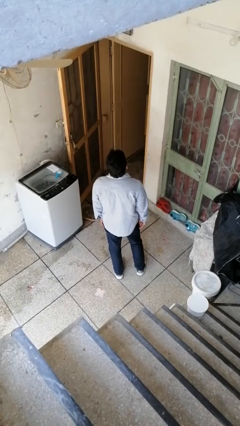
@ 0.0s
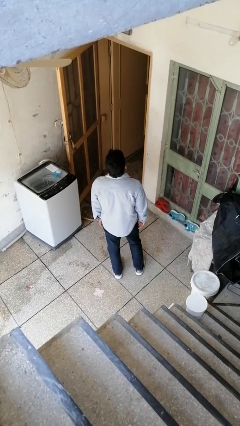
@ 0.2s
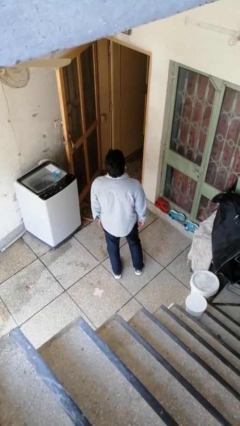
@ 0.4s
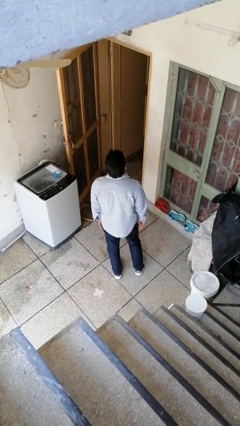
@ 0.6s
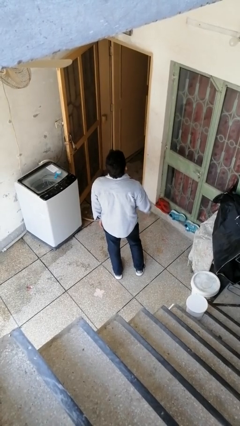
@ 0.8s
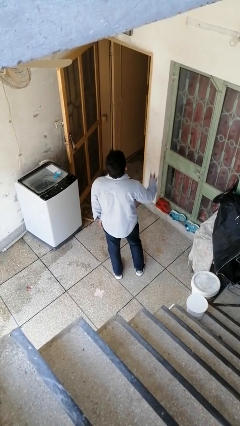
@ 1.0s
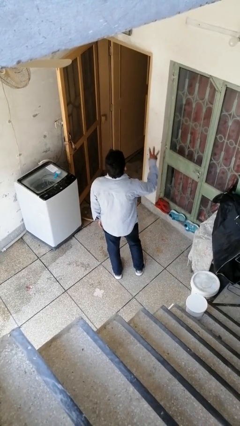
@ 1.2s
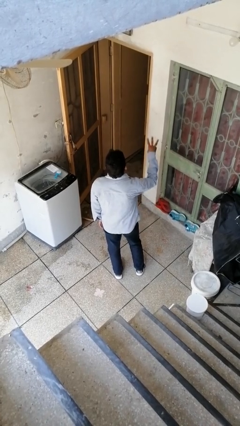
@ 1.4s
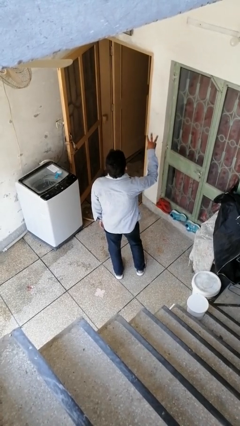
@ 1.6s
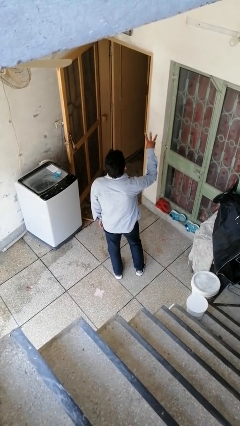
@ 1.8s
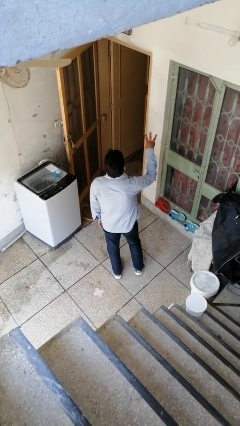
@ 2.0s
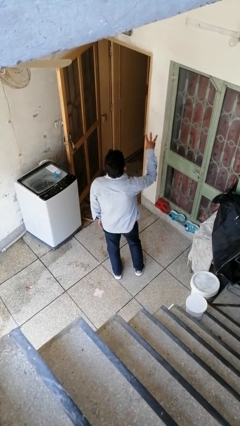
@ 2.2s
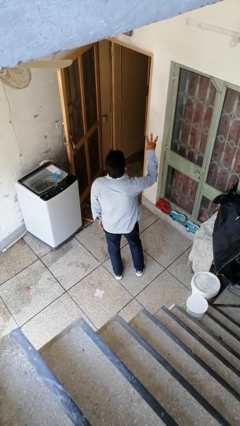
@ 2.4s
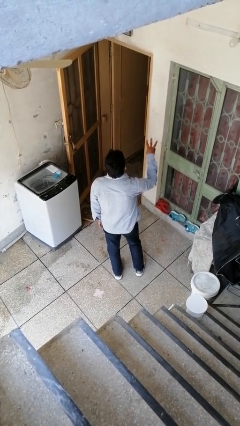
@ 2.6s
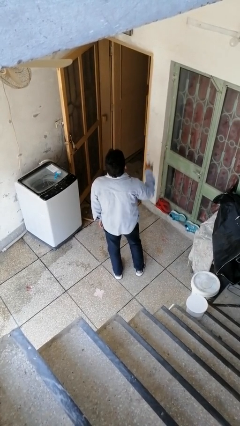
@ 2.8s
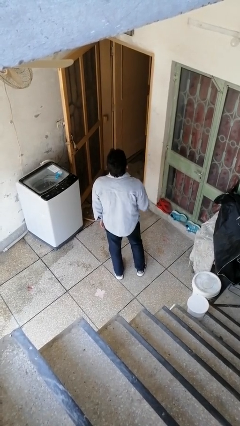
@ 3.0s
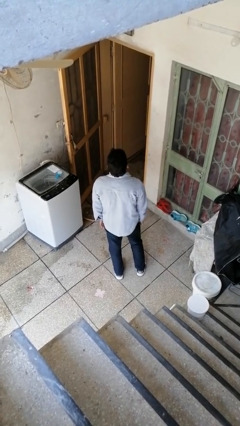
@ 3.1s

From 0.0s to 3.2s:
person gestures number three

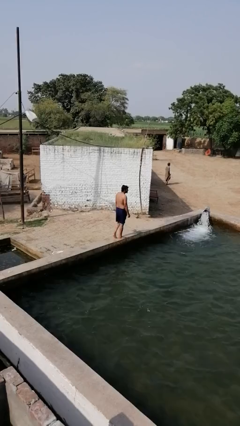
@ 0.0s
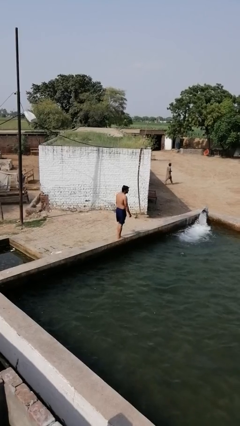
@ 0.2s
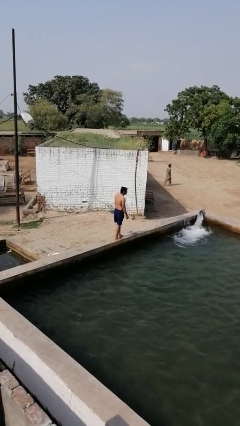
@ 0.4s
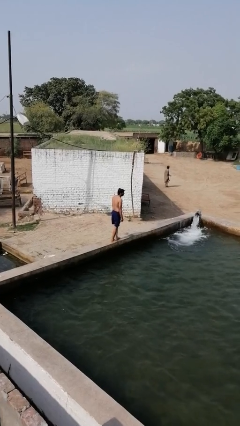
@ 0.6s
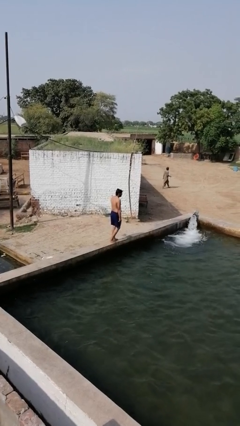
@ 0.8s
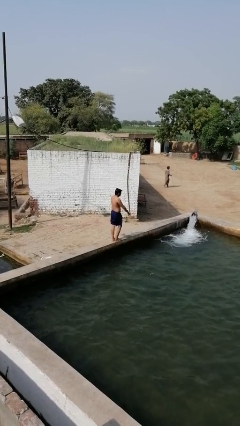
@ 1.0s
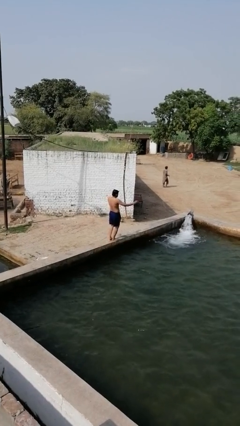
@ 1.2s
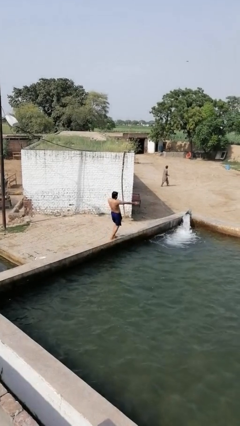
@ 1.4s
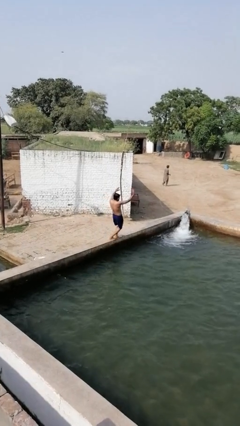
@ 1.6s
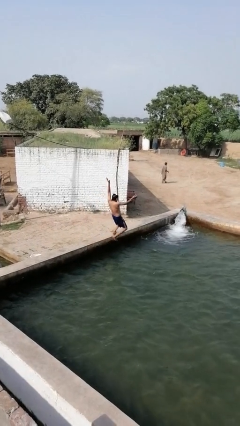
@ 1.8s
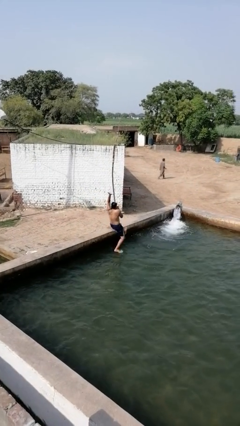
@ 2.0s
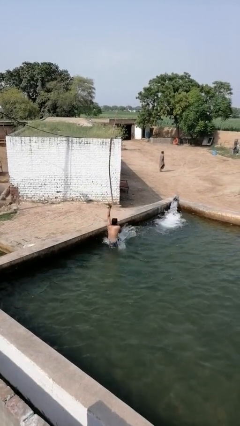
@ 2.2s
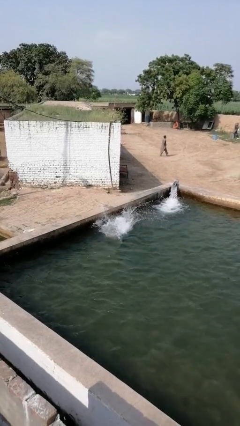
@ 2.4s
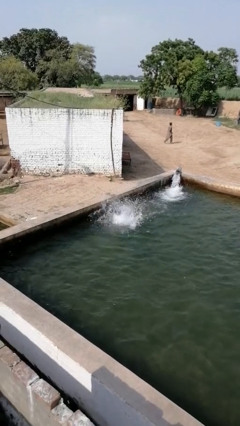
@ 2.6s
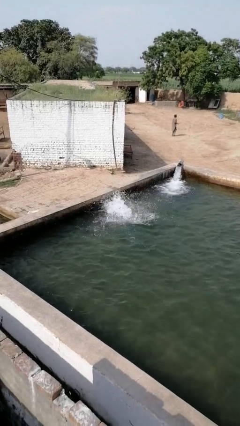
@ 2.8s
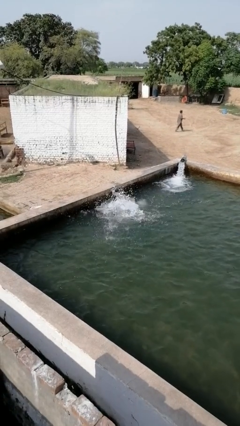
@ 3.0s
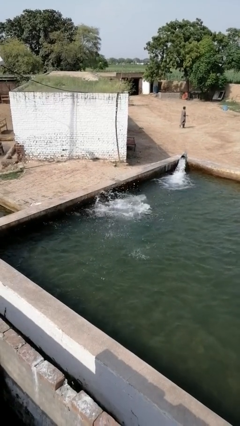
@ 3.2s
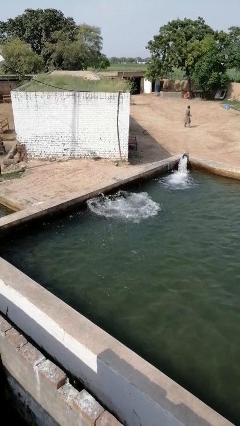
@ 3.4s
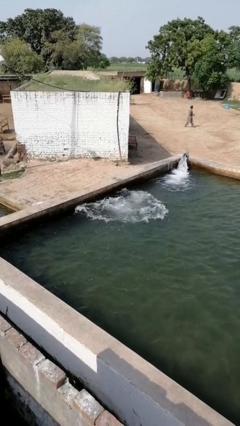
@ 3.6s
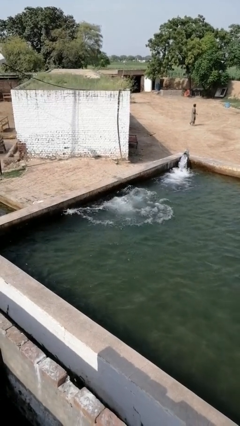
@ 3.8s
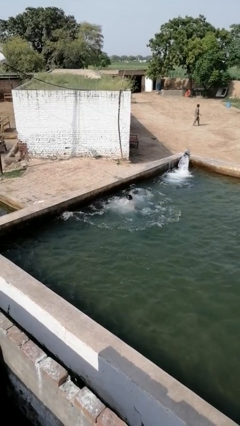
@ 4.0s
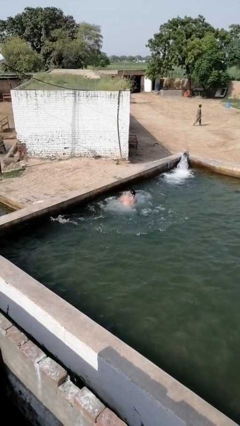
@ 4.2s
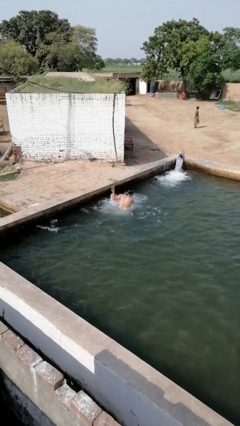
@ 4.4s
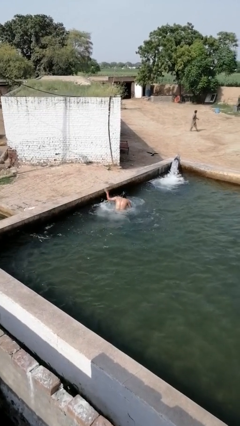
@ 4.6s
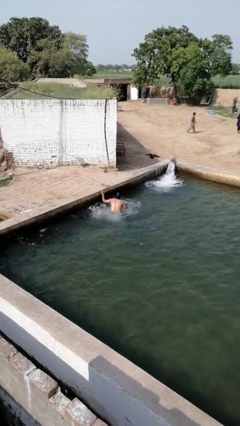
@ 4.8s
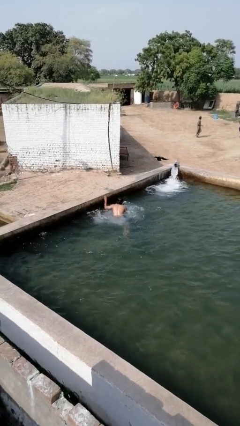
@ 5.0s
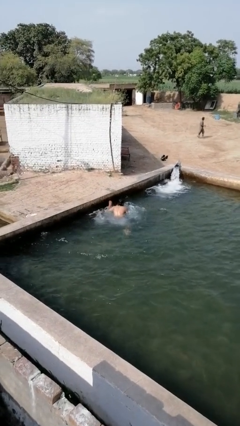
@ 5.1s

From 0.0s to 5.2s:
person falls into pool

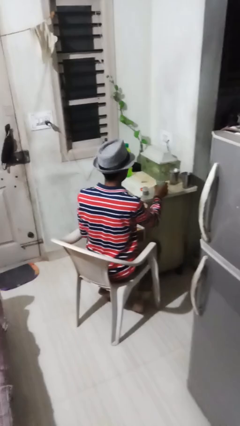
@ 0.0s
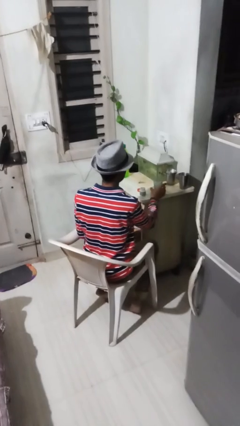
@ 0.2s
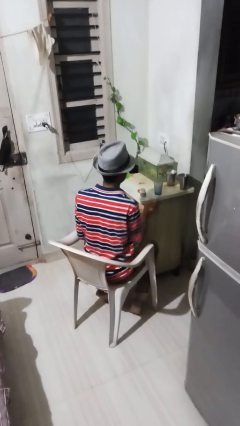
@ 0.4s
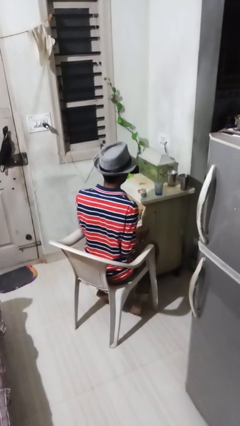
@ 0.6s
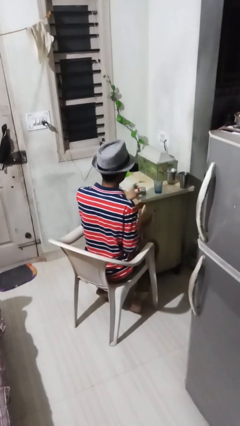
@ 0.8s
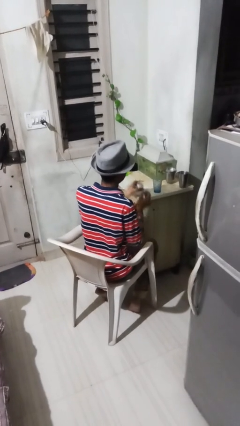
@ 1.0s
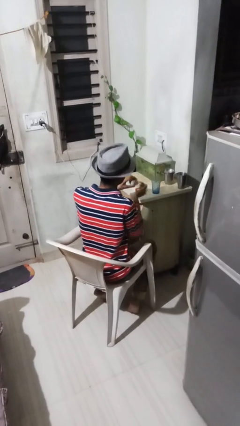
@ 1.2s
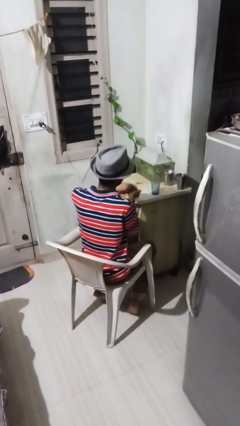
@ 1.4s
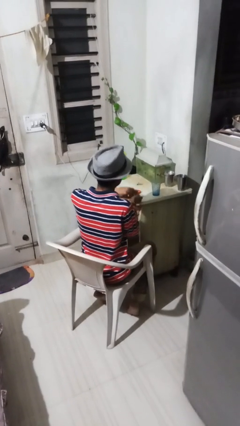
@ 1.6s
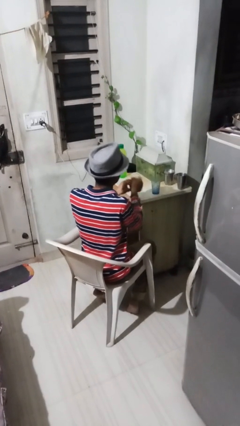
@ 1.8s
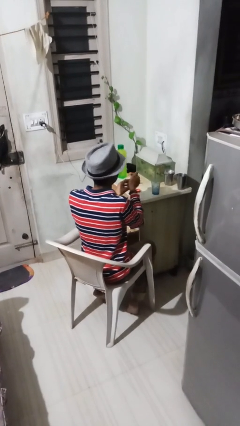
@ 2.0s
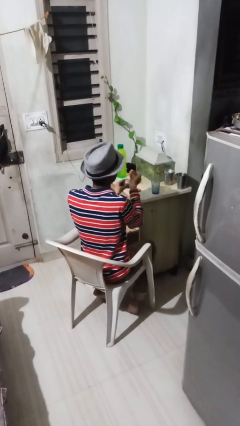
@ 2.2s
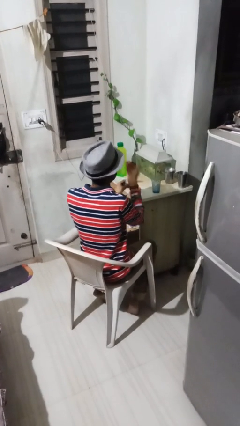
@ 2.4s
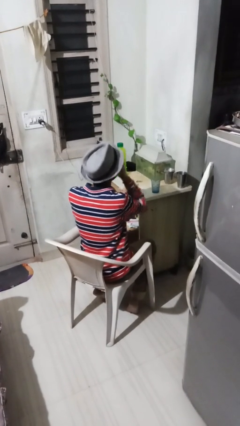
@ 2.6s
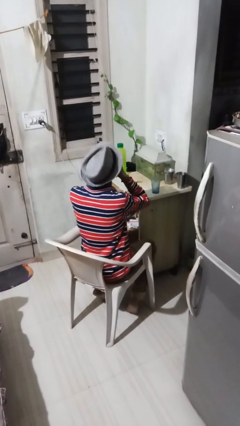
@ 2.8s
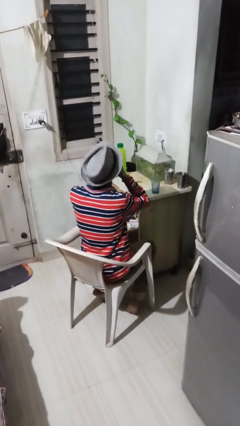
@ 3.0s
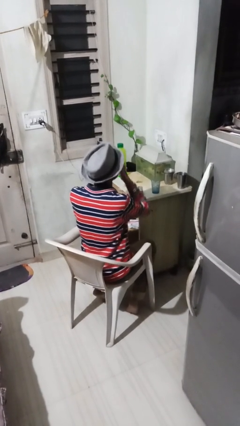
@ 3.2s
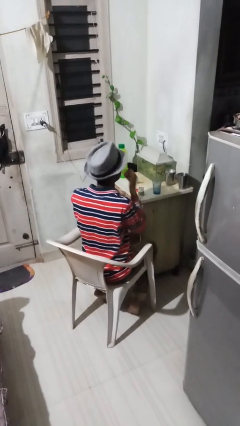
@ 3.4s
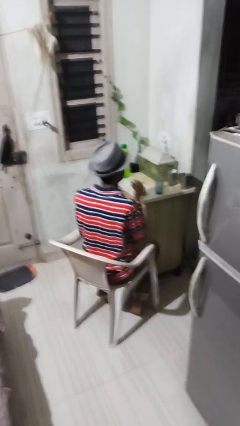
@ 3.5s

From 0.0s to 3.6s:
person takes medicine pills

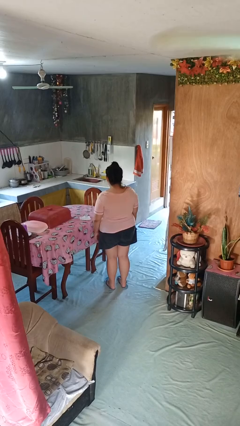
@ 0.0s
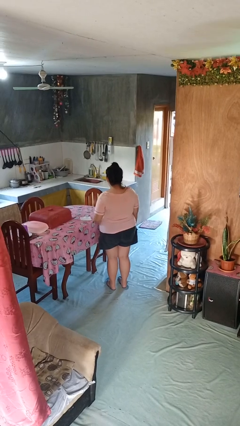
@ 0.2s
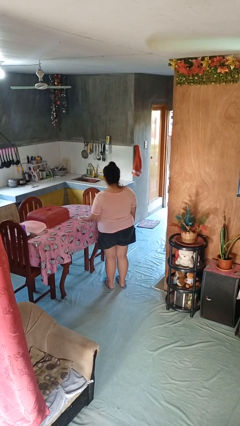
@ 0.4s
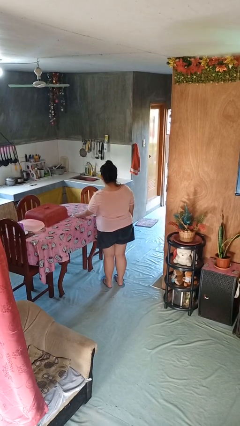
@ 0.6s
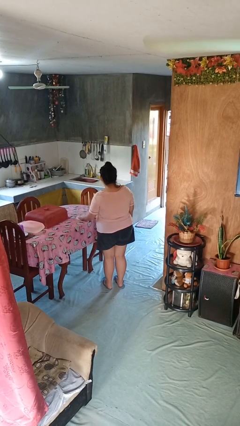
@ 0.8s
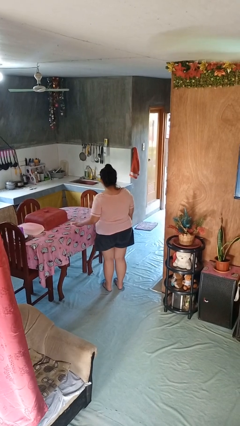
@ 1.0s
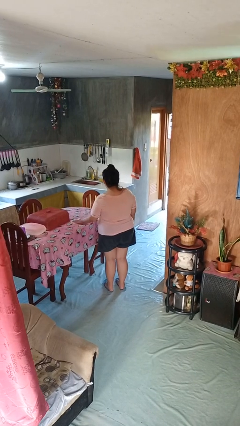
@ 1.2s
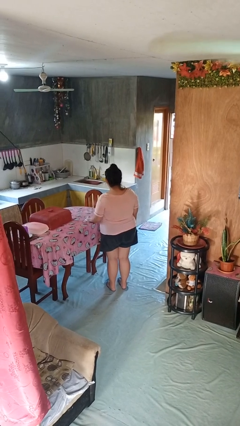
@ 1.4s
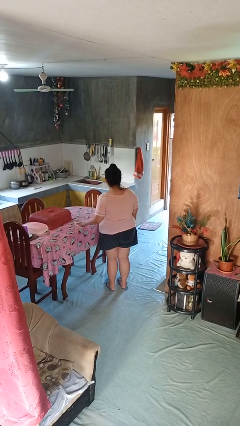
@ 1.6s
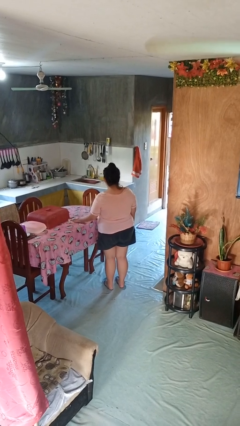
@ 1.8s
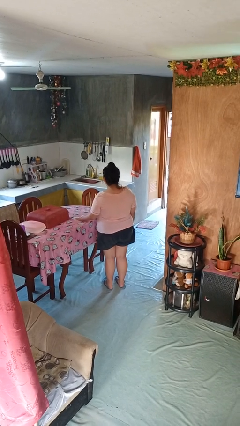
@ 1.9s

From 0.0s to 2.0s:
person cleans table with rag

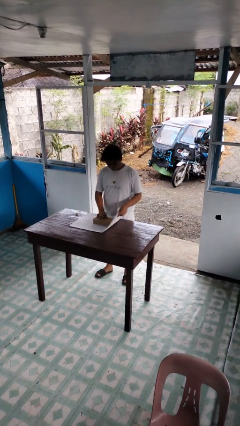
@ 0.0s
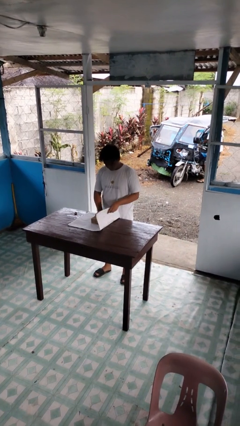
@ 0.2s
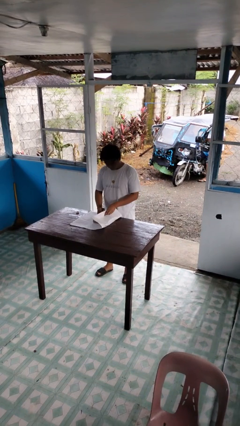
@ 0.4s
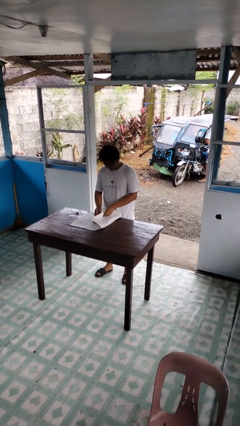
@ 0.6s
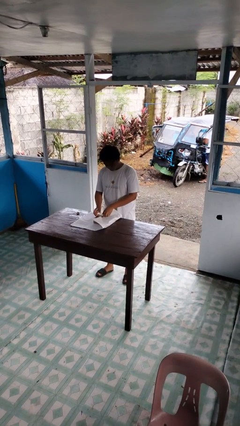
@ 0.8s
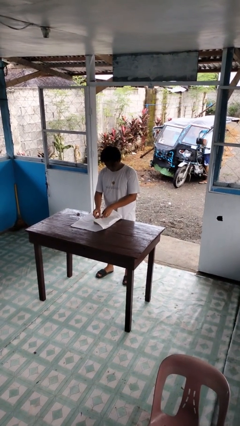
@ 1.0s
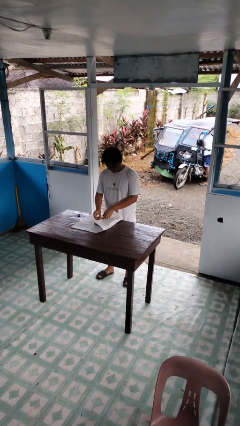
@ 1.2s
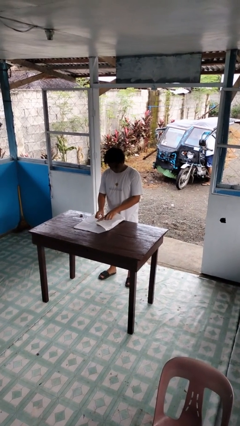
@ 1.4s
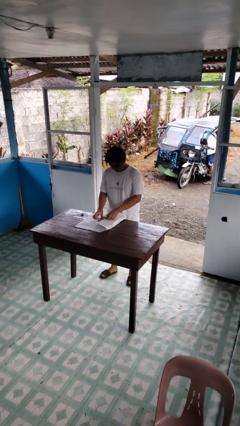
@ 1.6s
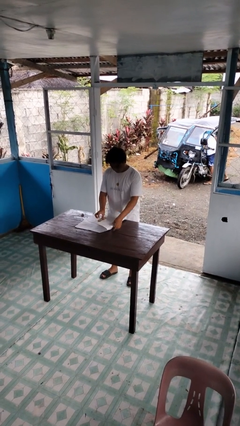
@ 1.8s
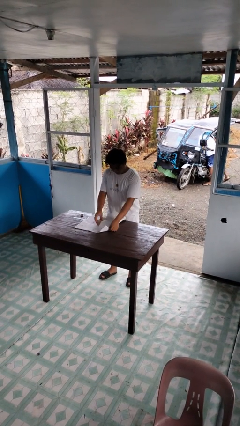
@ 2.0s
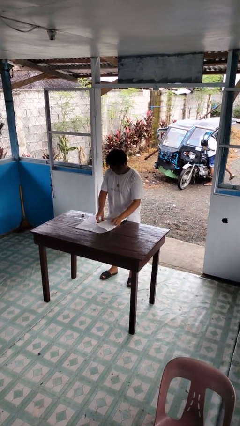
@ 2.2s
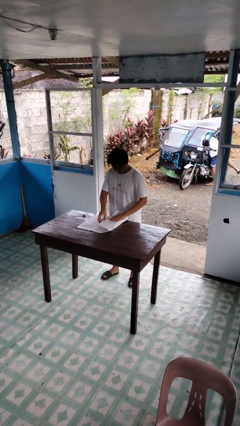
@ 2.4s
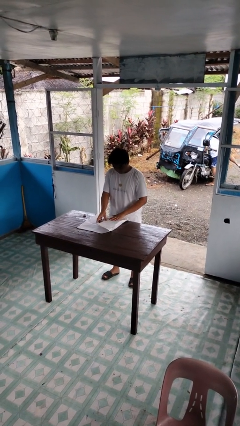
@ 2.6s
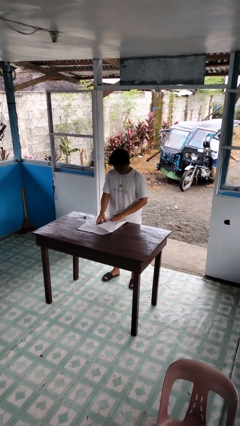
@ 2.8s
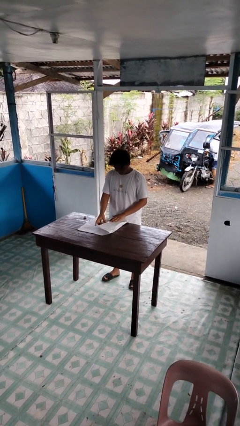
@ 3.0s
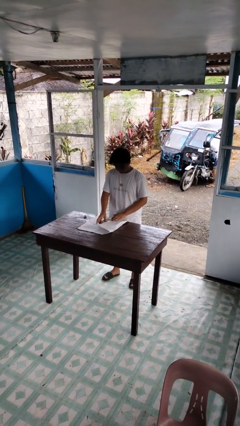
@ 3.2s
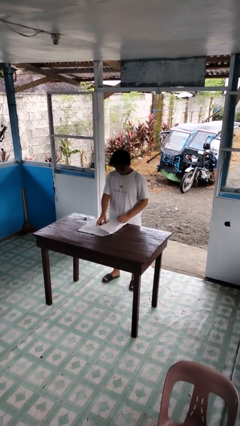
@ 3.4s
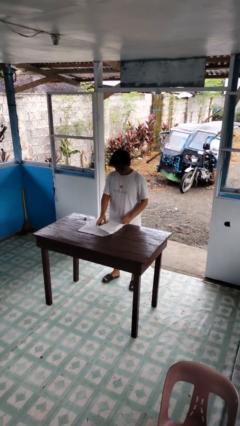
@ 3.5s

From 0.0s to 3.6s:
person wraps box

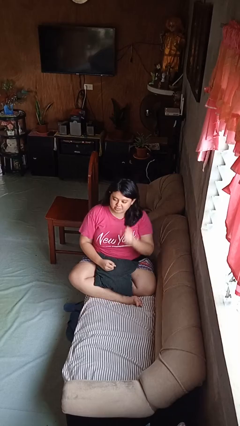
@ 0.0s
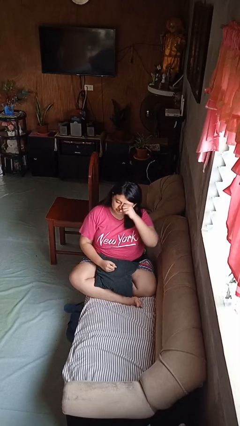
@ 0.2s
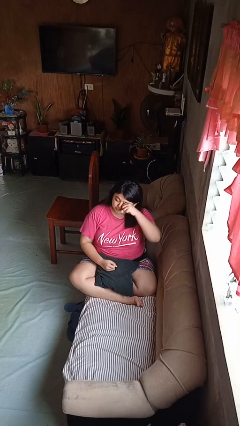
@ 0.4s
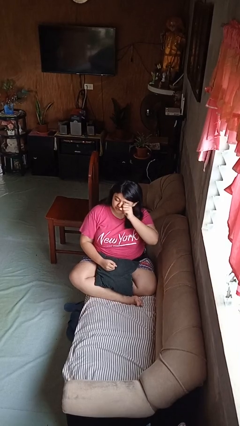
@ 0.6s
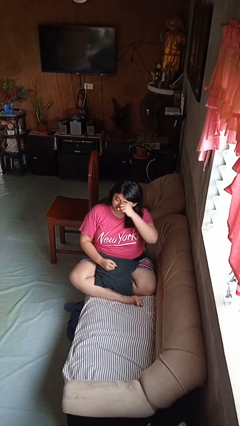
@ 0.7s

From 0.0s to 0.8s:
person rubs eyes
